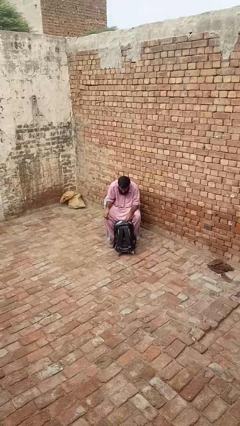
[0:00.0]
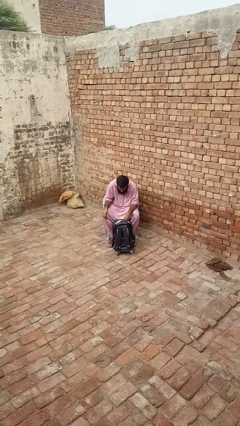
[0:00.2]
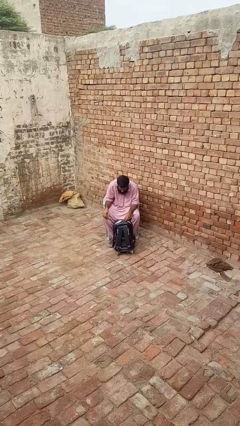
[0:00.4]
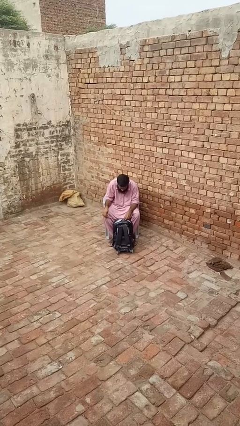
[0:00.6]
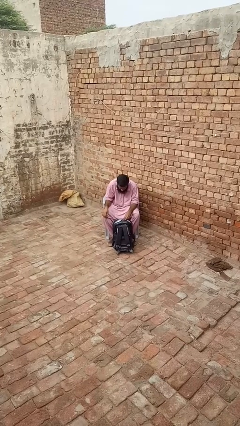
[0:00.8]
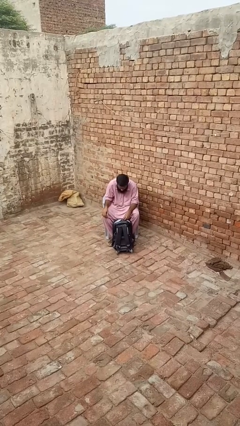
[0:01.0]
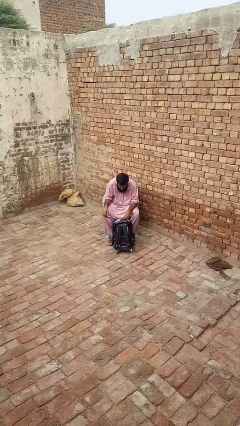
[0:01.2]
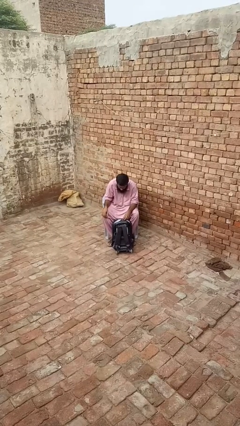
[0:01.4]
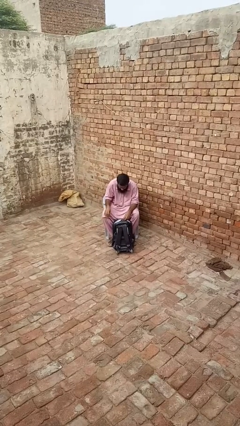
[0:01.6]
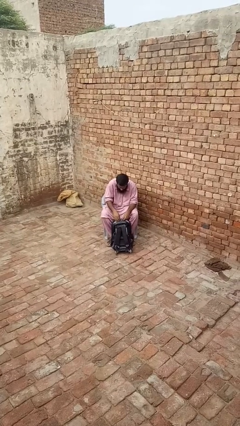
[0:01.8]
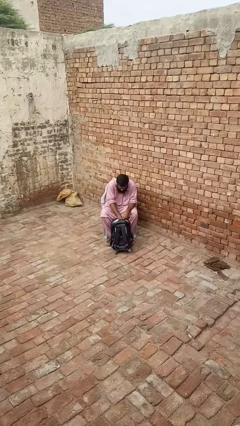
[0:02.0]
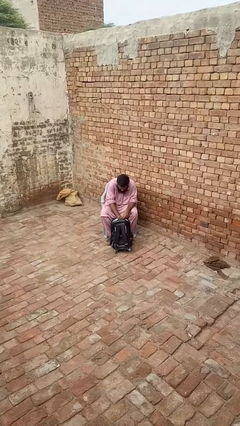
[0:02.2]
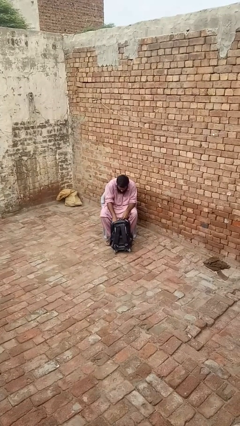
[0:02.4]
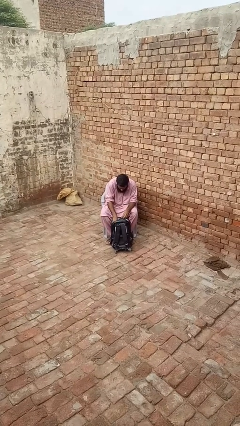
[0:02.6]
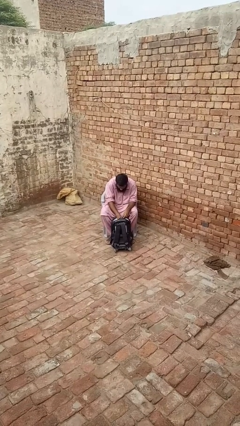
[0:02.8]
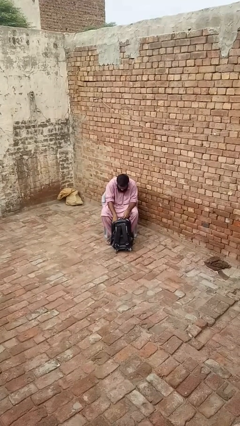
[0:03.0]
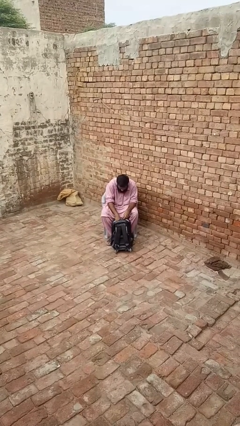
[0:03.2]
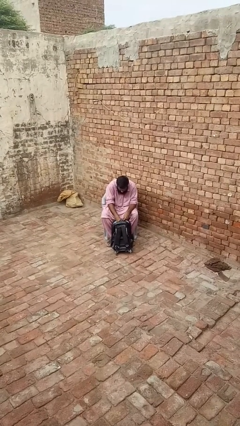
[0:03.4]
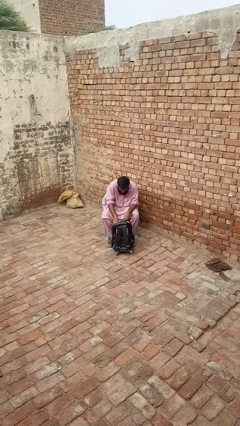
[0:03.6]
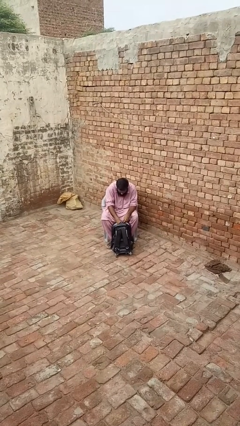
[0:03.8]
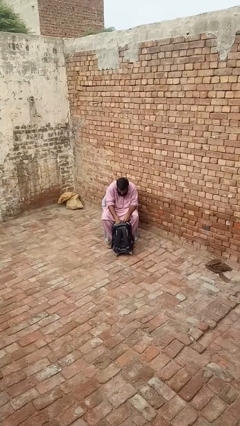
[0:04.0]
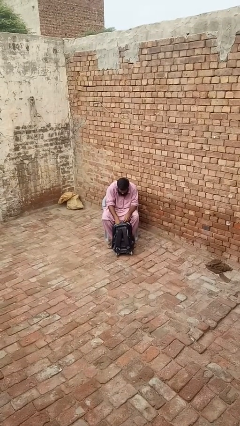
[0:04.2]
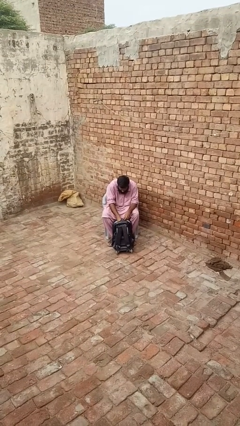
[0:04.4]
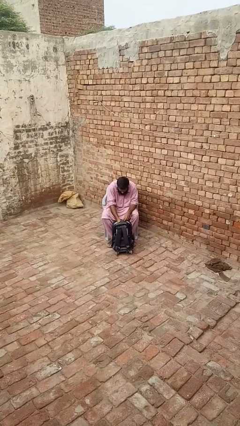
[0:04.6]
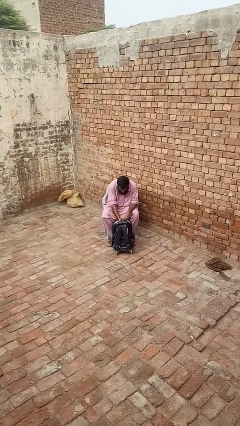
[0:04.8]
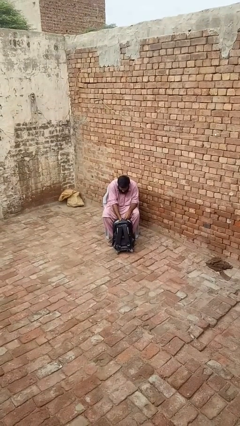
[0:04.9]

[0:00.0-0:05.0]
person searches in backpack

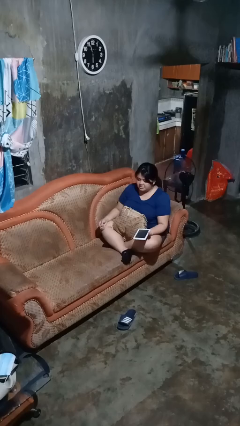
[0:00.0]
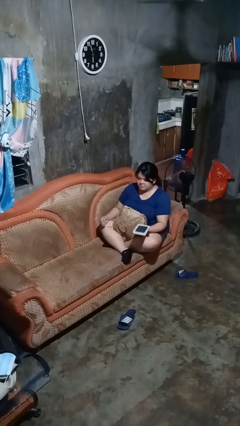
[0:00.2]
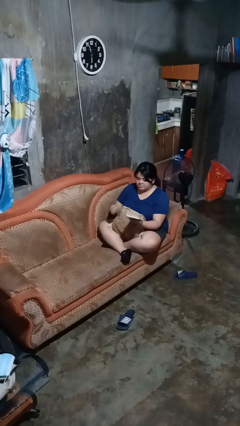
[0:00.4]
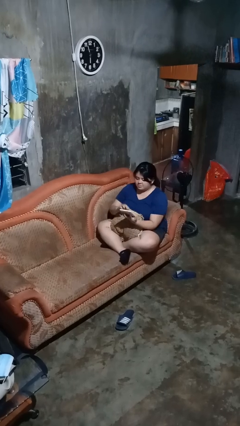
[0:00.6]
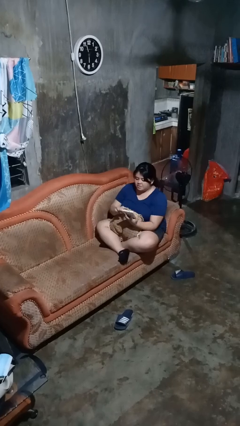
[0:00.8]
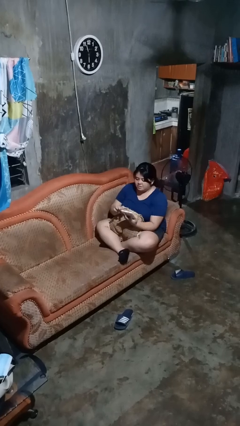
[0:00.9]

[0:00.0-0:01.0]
person interacts with tablet

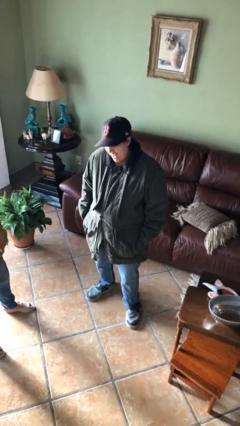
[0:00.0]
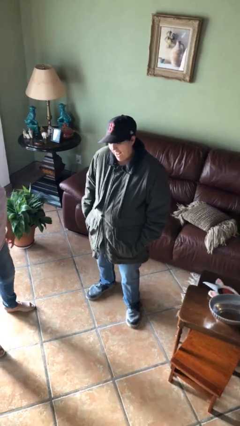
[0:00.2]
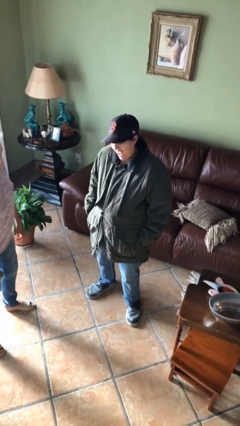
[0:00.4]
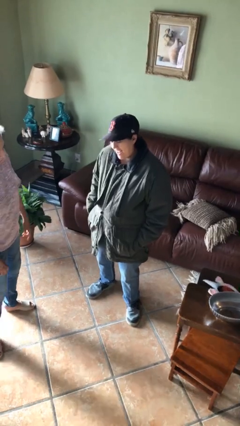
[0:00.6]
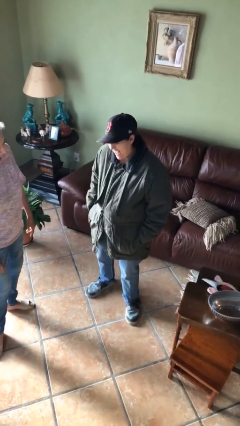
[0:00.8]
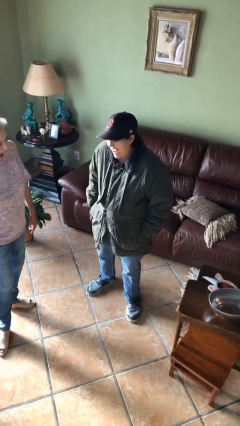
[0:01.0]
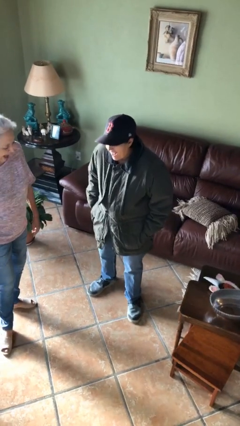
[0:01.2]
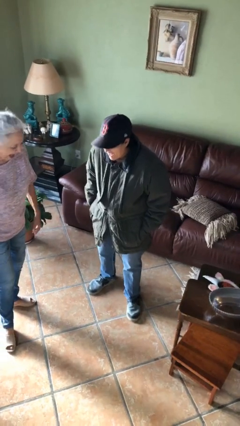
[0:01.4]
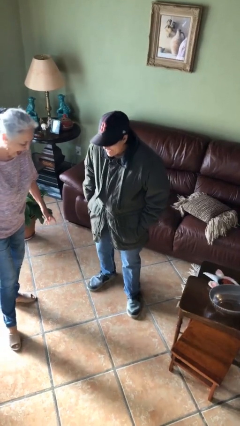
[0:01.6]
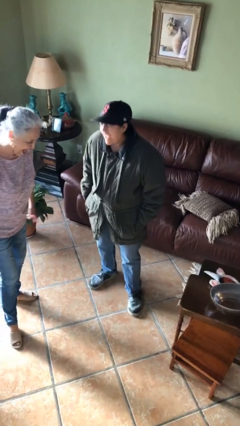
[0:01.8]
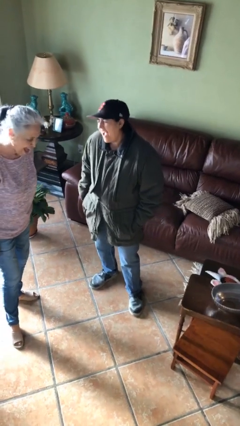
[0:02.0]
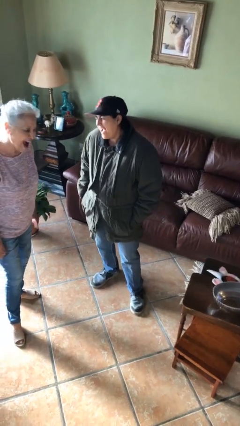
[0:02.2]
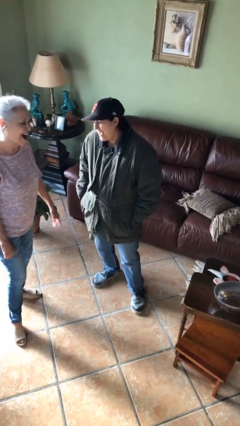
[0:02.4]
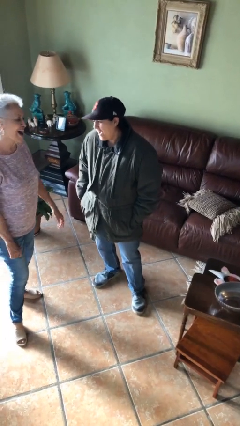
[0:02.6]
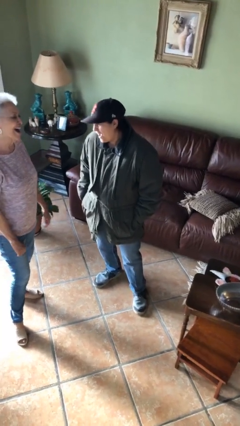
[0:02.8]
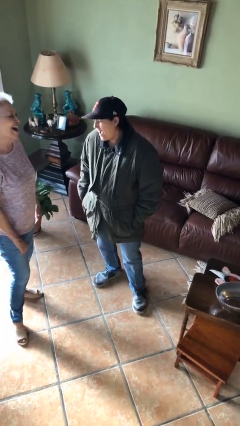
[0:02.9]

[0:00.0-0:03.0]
person laughs with person

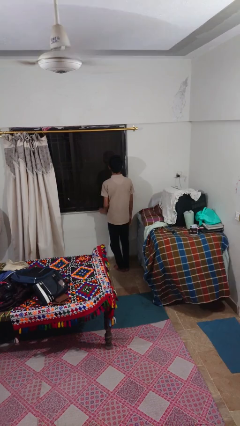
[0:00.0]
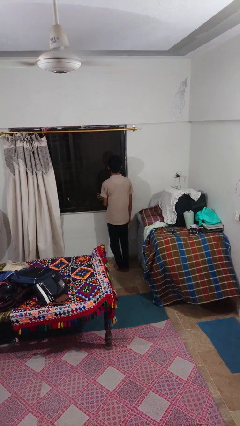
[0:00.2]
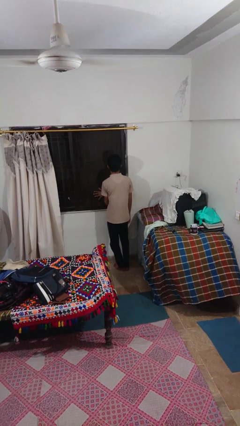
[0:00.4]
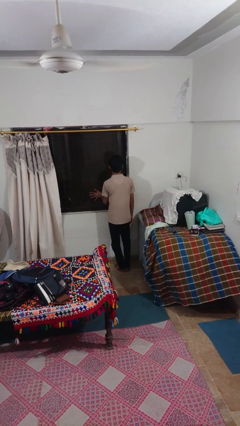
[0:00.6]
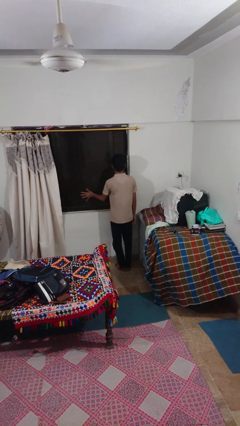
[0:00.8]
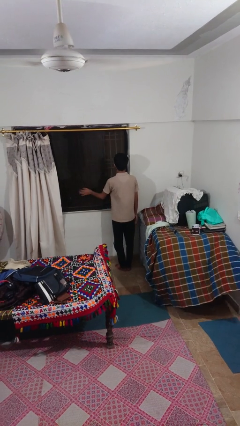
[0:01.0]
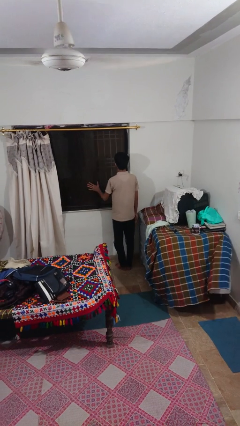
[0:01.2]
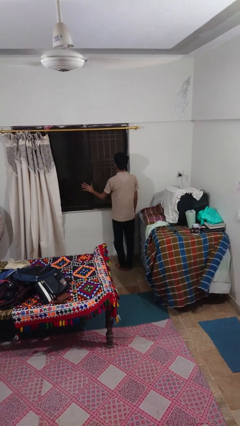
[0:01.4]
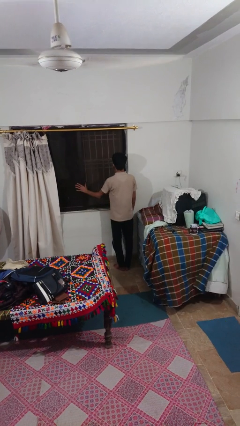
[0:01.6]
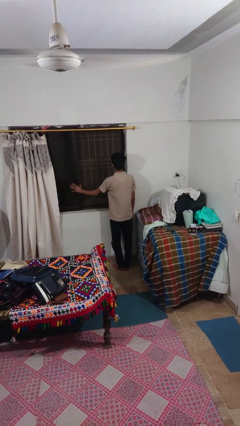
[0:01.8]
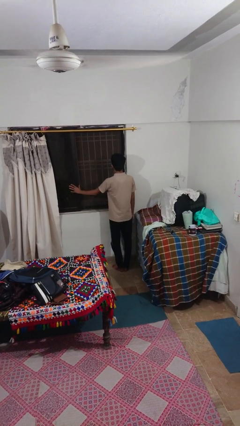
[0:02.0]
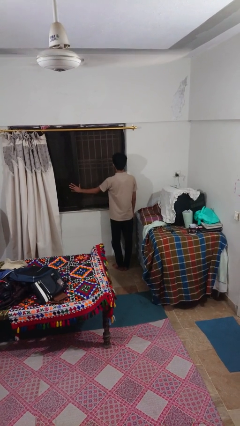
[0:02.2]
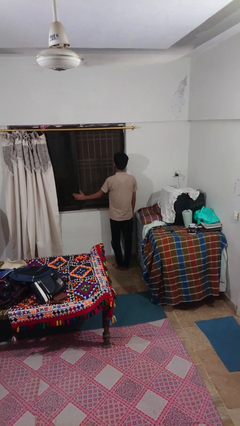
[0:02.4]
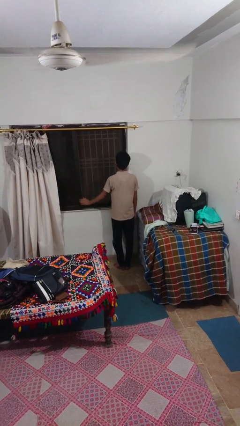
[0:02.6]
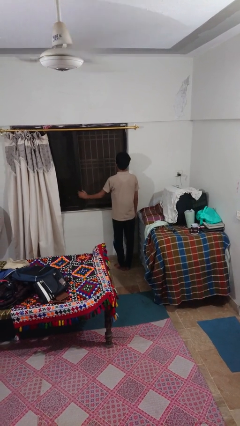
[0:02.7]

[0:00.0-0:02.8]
person opens sliding door

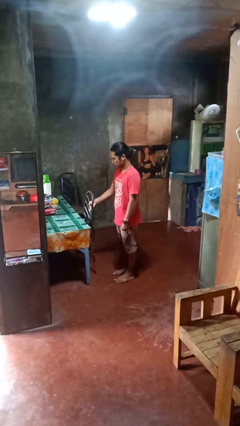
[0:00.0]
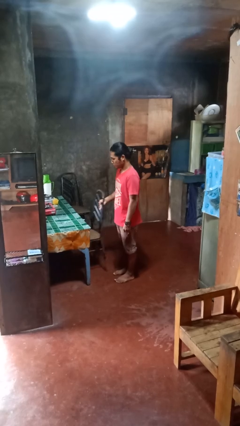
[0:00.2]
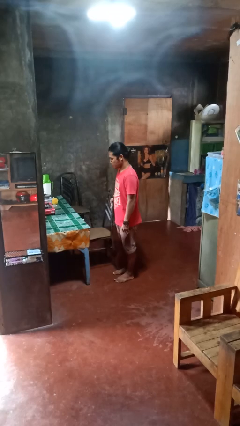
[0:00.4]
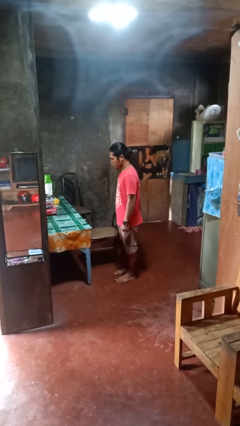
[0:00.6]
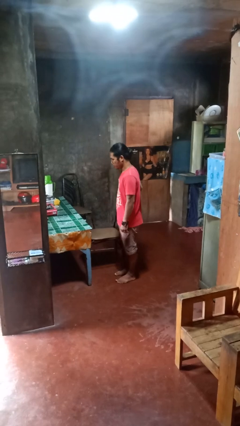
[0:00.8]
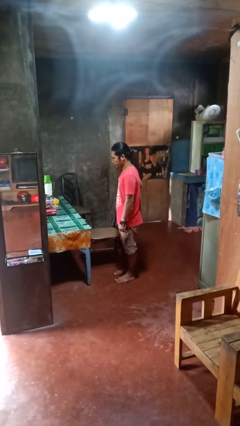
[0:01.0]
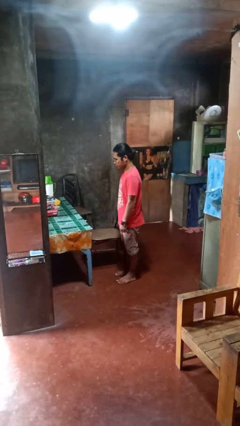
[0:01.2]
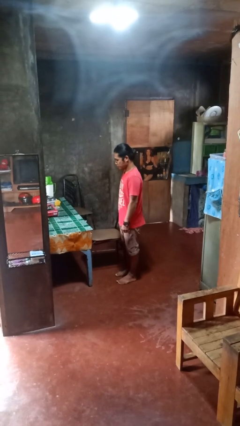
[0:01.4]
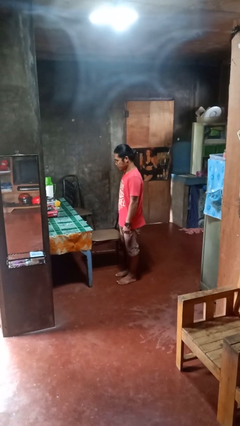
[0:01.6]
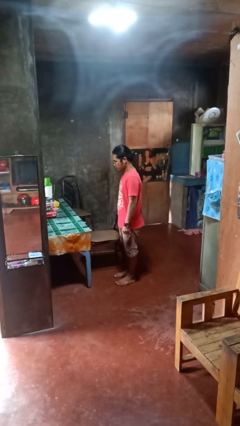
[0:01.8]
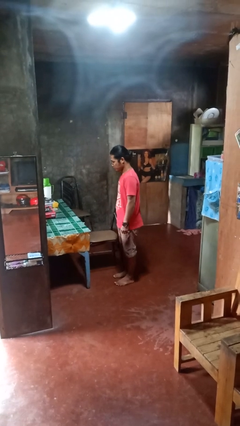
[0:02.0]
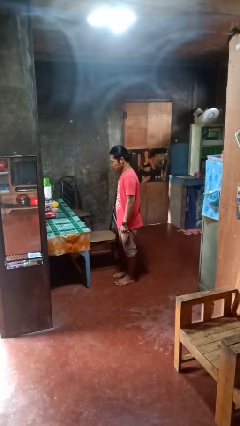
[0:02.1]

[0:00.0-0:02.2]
person pulls out chair

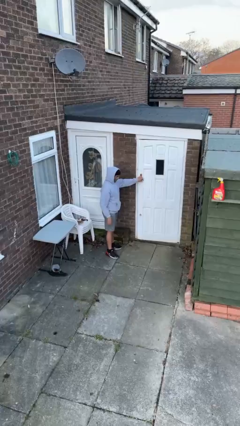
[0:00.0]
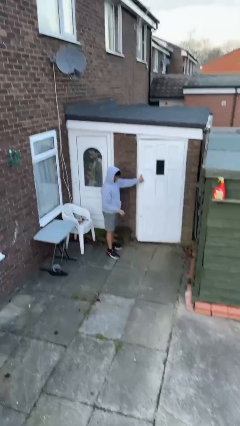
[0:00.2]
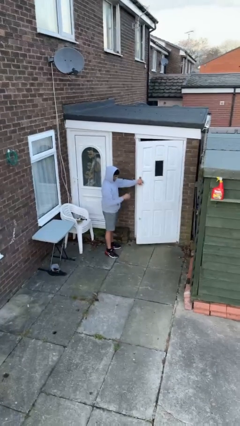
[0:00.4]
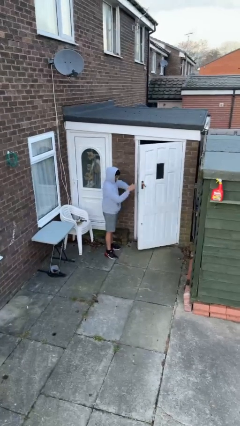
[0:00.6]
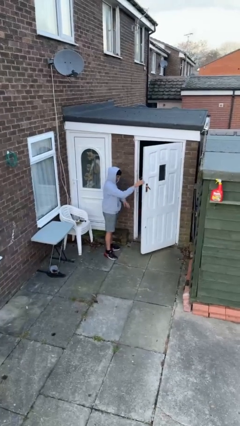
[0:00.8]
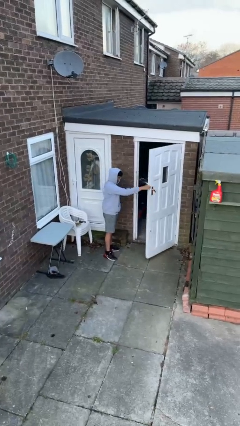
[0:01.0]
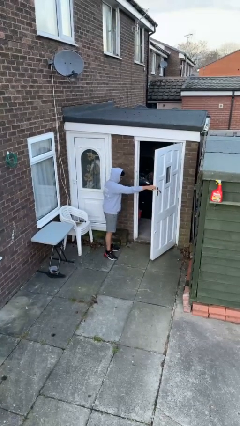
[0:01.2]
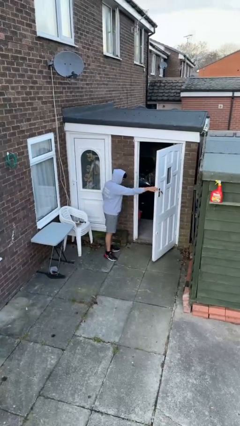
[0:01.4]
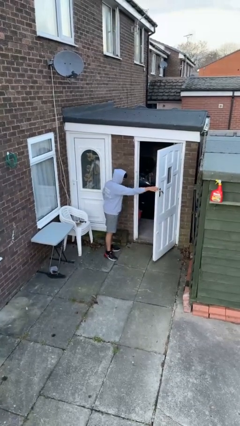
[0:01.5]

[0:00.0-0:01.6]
person opens facility door

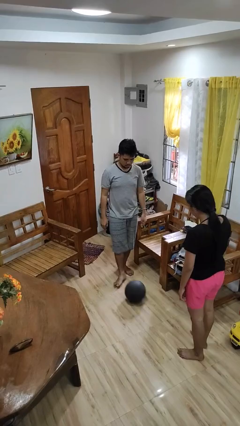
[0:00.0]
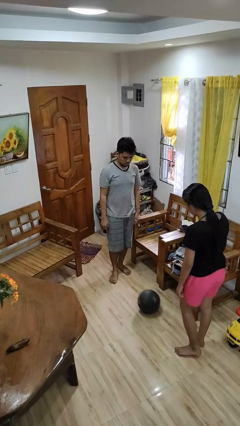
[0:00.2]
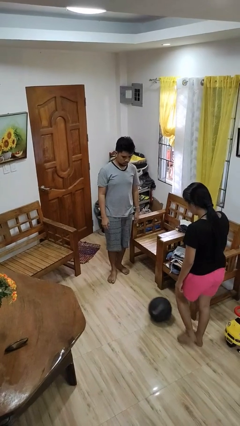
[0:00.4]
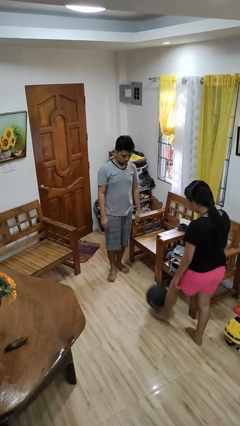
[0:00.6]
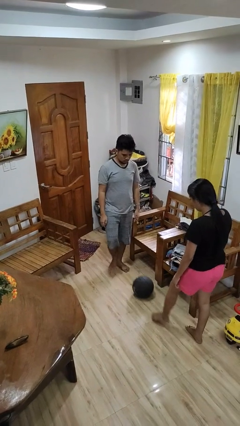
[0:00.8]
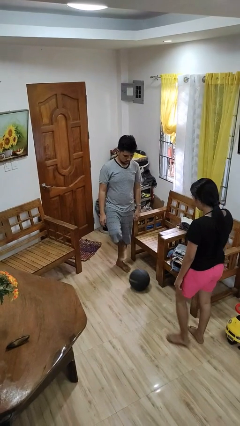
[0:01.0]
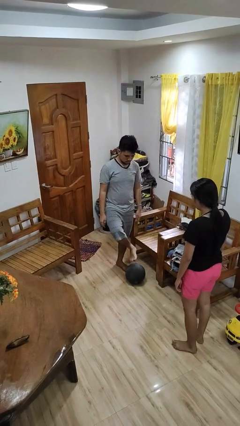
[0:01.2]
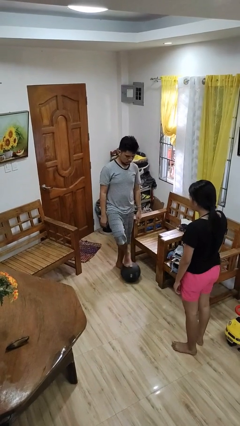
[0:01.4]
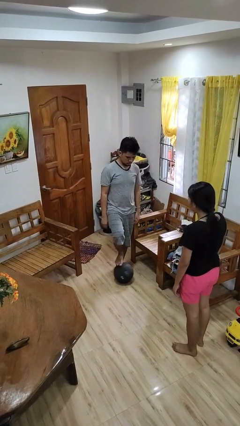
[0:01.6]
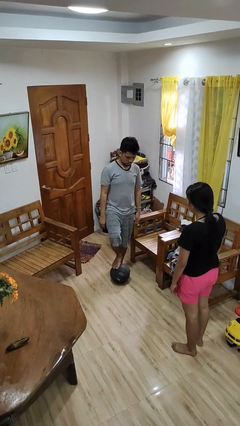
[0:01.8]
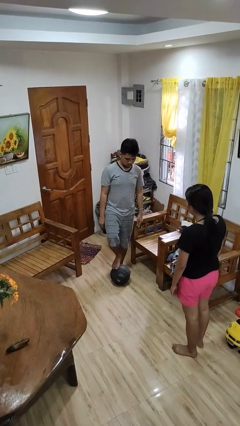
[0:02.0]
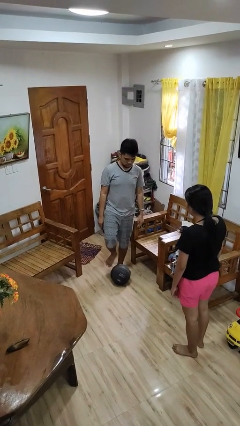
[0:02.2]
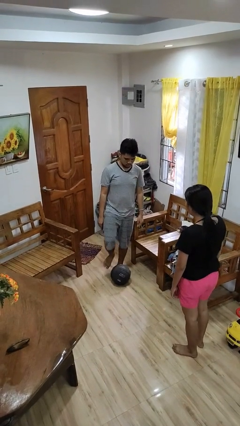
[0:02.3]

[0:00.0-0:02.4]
person kicks object to person
